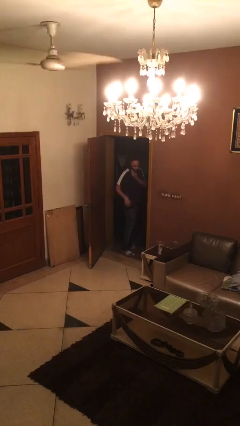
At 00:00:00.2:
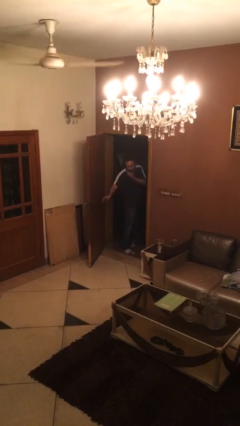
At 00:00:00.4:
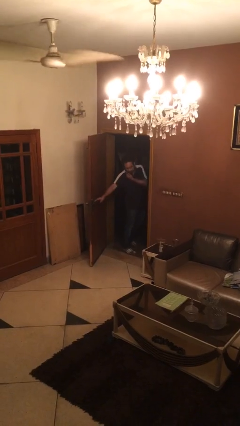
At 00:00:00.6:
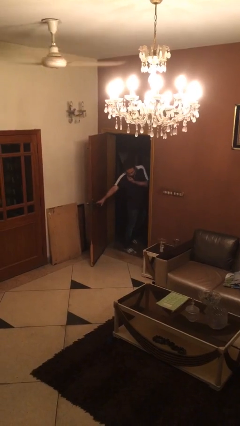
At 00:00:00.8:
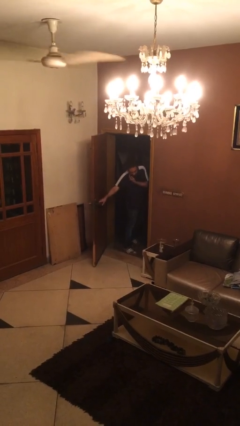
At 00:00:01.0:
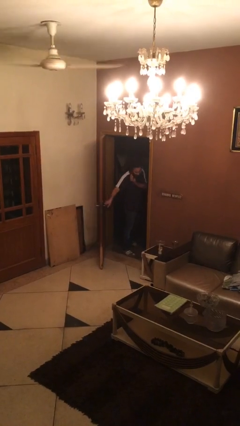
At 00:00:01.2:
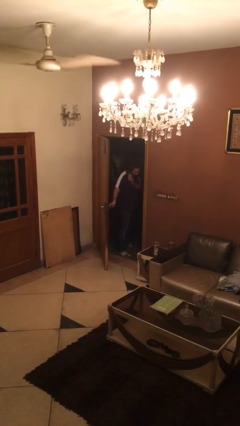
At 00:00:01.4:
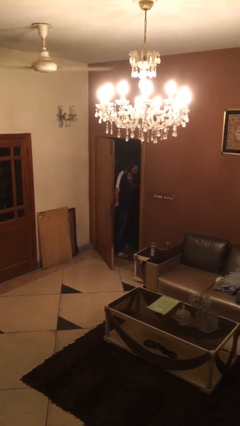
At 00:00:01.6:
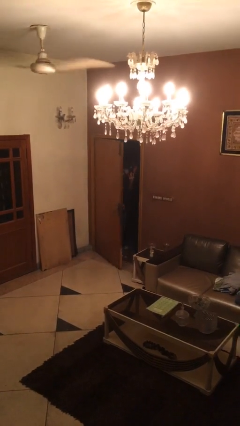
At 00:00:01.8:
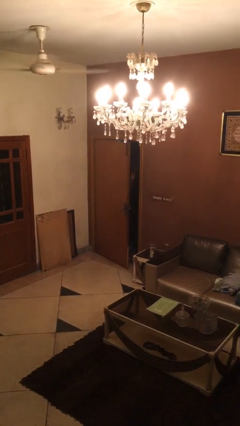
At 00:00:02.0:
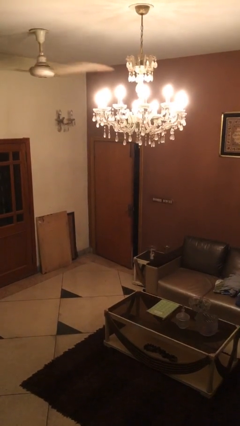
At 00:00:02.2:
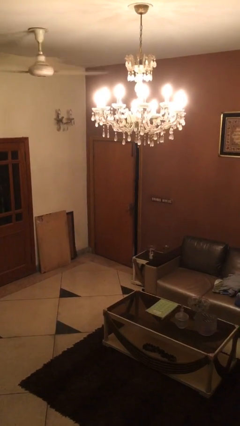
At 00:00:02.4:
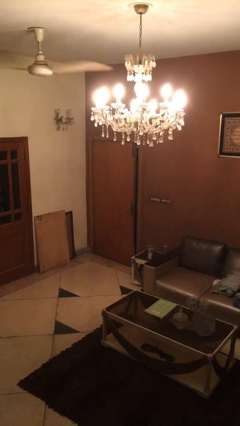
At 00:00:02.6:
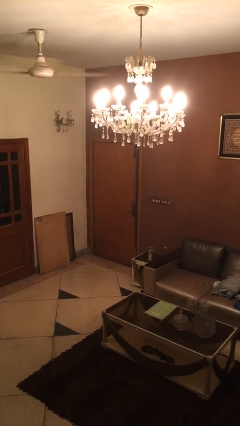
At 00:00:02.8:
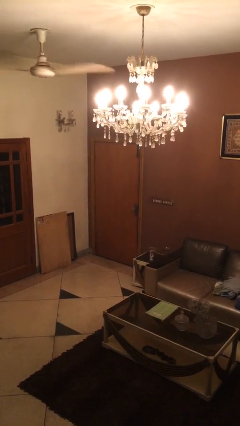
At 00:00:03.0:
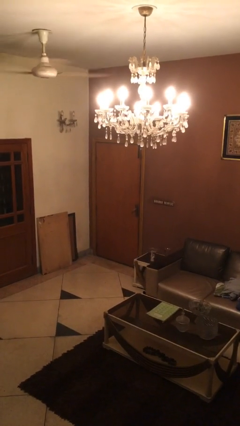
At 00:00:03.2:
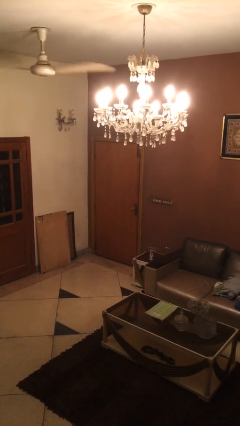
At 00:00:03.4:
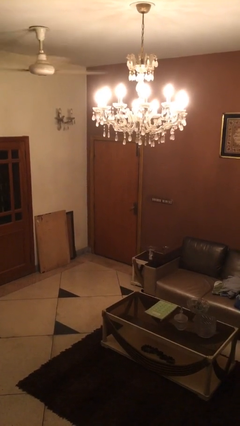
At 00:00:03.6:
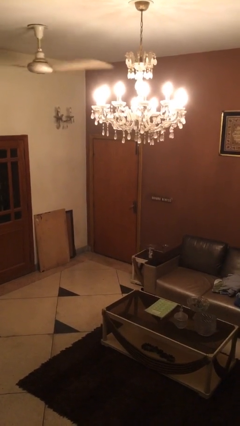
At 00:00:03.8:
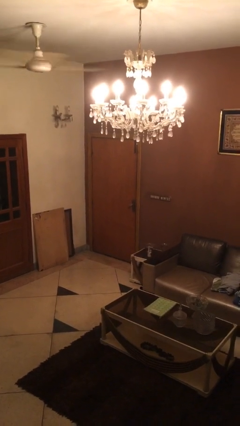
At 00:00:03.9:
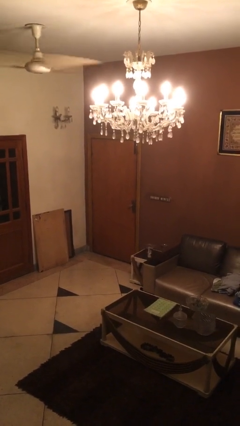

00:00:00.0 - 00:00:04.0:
person closes facility door

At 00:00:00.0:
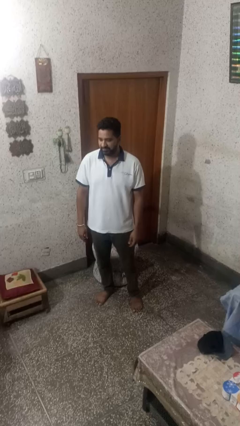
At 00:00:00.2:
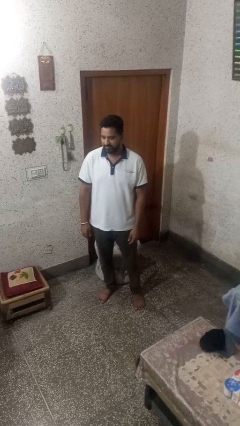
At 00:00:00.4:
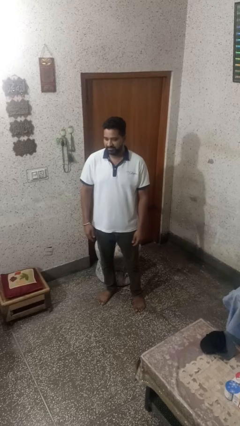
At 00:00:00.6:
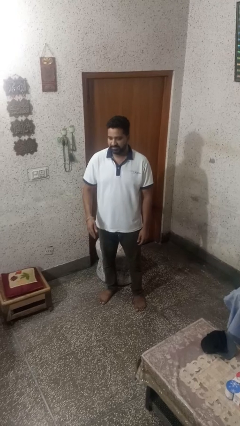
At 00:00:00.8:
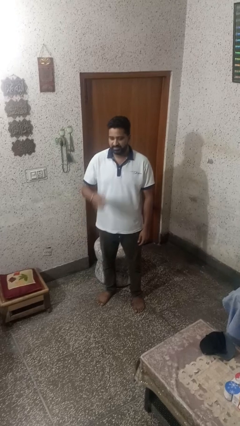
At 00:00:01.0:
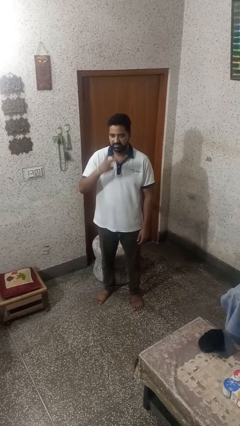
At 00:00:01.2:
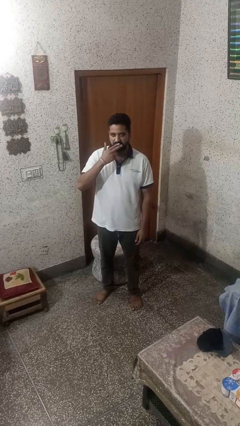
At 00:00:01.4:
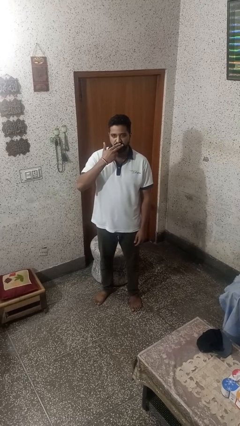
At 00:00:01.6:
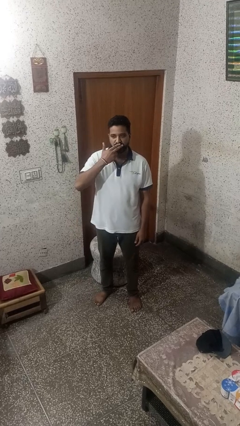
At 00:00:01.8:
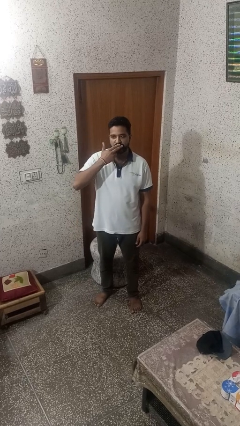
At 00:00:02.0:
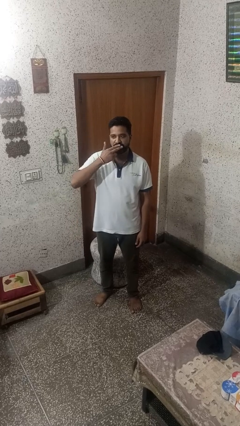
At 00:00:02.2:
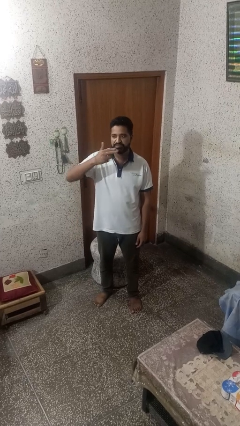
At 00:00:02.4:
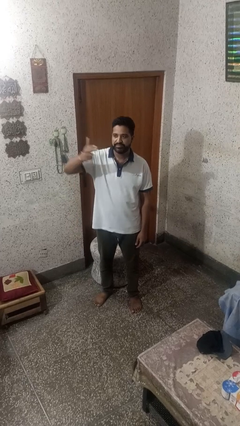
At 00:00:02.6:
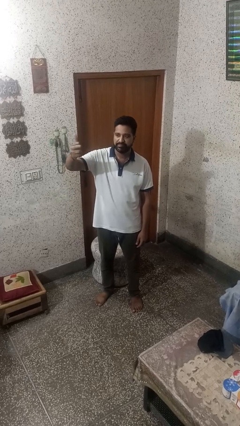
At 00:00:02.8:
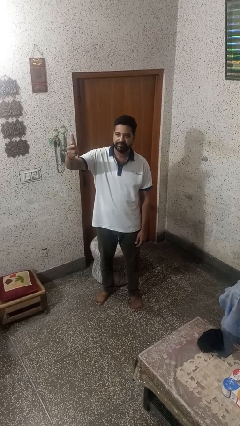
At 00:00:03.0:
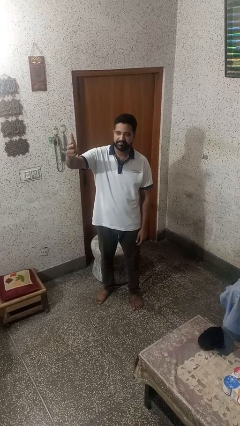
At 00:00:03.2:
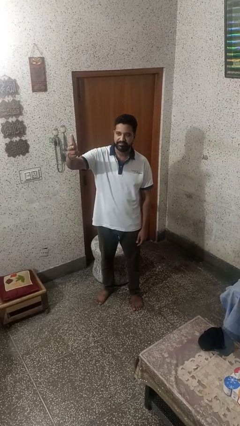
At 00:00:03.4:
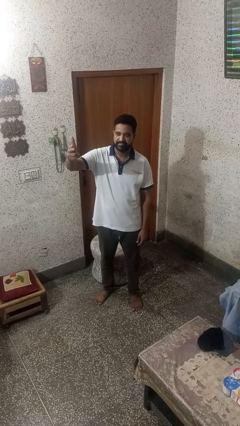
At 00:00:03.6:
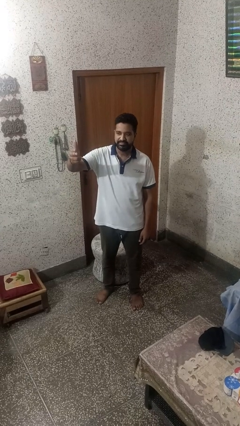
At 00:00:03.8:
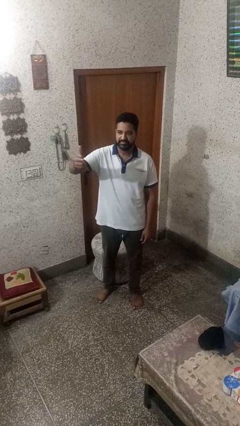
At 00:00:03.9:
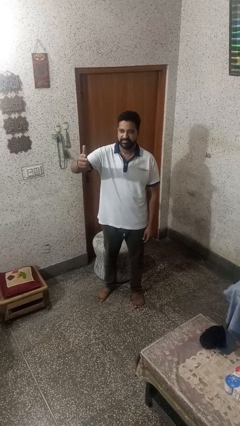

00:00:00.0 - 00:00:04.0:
person gestures blow kiss

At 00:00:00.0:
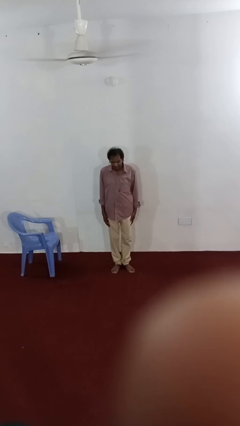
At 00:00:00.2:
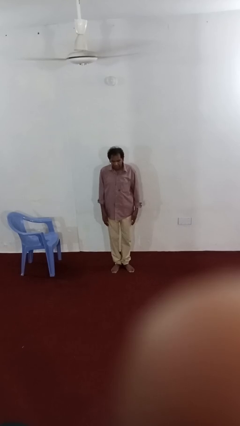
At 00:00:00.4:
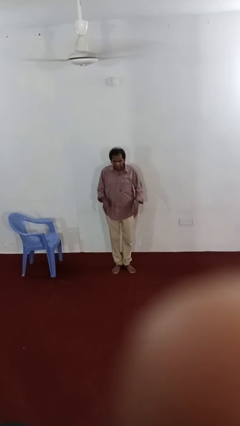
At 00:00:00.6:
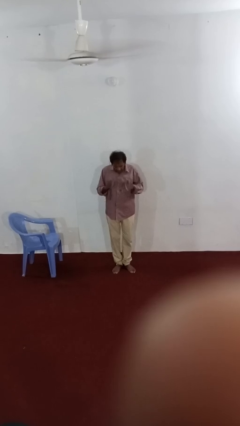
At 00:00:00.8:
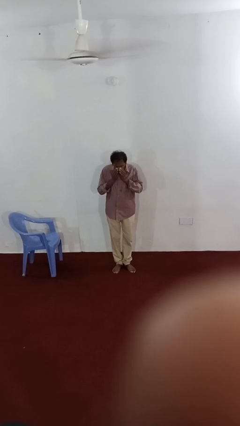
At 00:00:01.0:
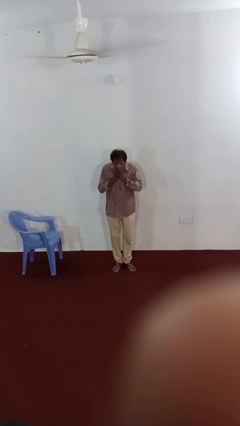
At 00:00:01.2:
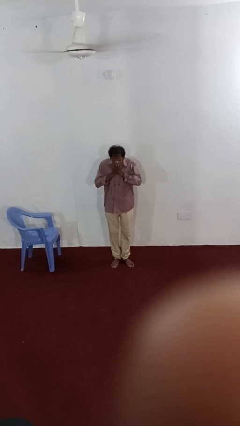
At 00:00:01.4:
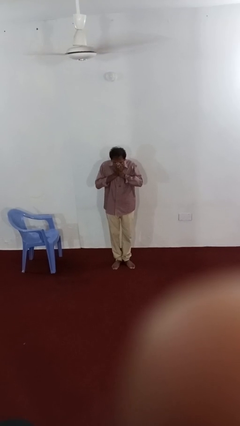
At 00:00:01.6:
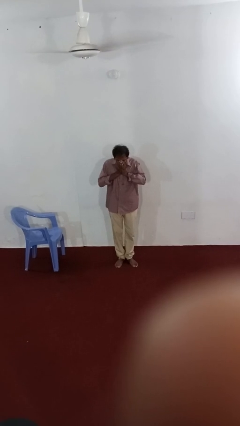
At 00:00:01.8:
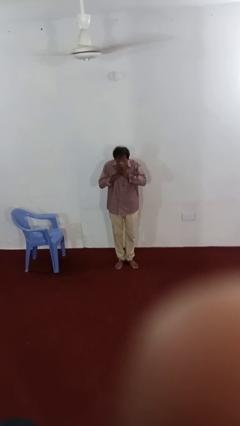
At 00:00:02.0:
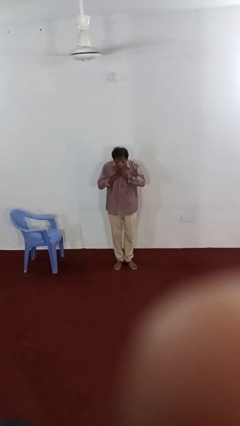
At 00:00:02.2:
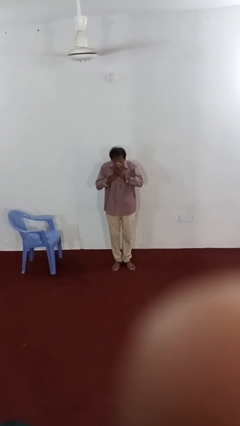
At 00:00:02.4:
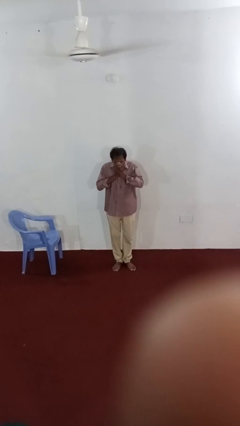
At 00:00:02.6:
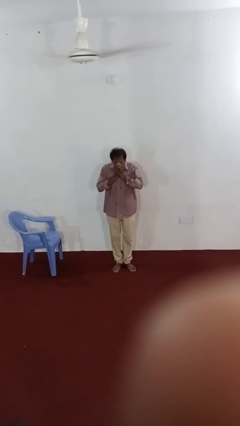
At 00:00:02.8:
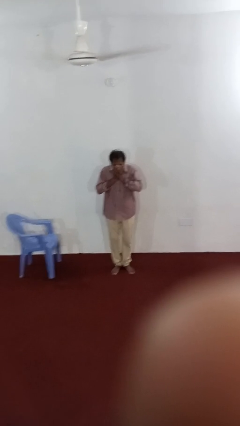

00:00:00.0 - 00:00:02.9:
person sneezes into hand

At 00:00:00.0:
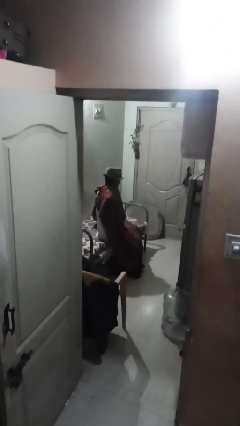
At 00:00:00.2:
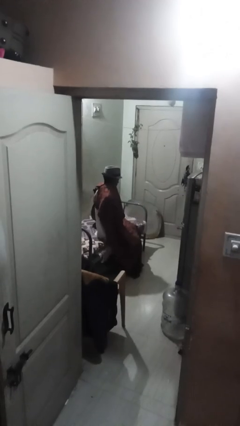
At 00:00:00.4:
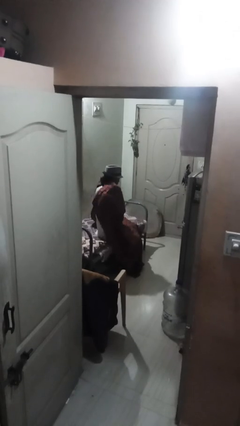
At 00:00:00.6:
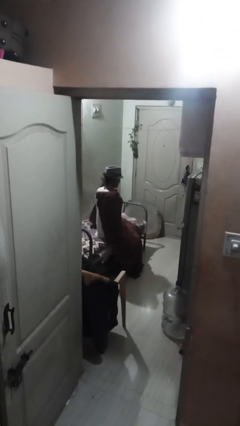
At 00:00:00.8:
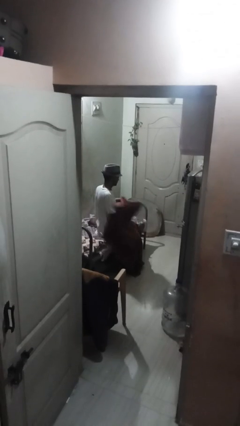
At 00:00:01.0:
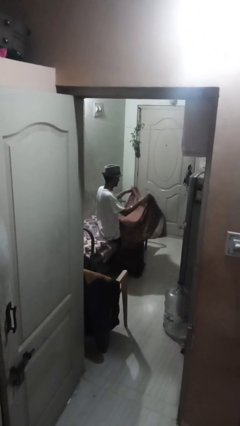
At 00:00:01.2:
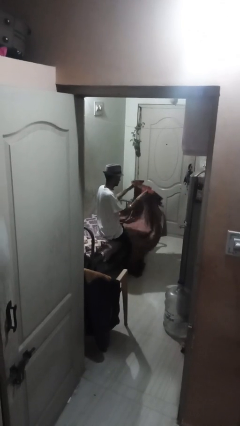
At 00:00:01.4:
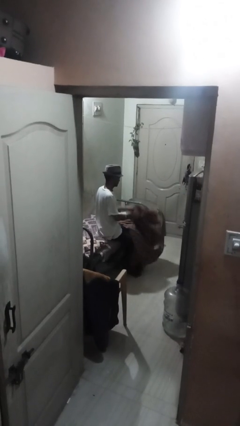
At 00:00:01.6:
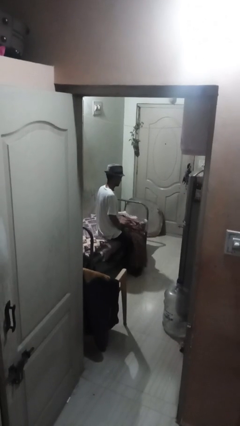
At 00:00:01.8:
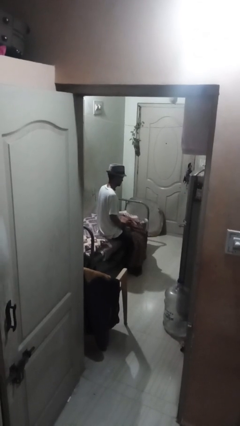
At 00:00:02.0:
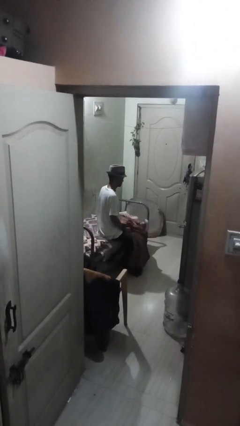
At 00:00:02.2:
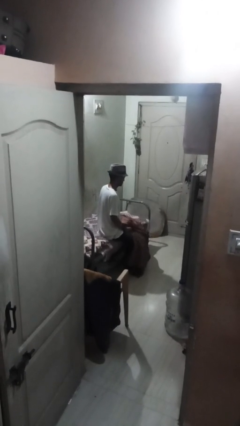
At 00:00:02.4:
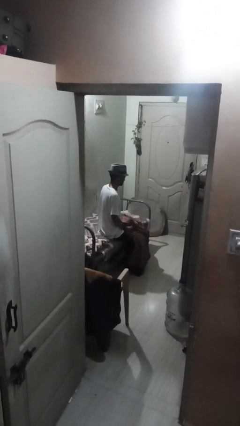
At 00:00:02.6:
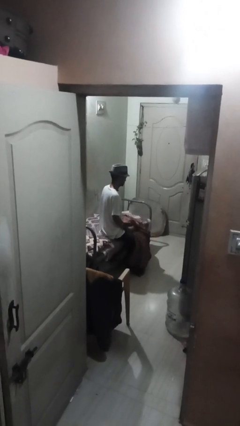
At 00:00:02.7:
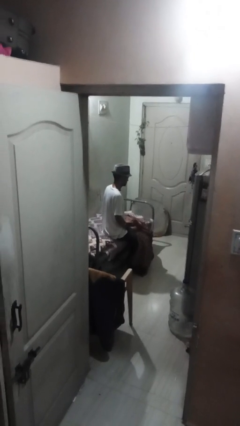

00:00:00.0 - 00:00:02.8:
person uncovers with blanket

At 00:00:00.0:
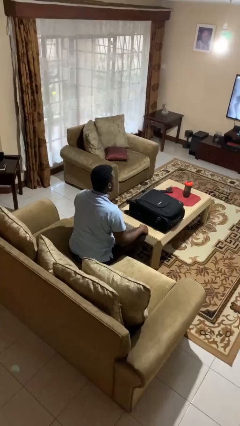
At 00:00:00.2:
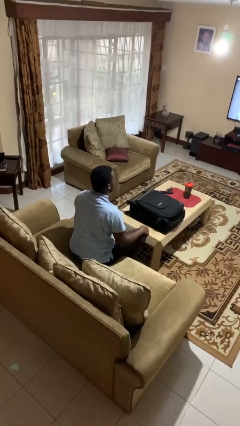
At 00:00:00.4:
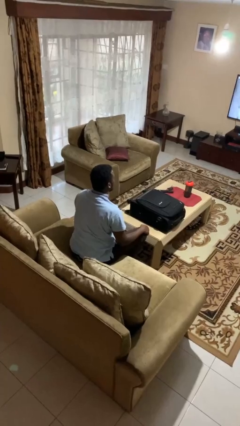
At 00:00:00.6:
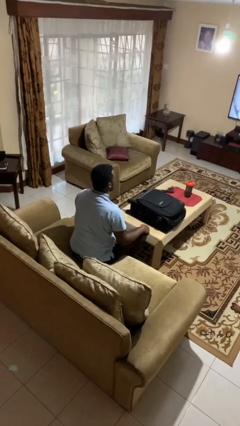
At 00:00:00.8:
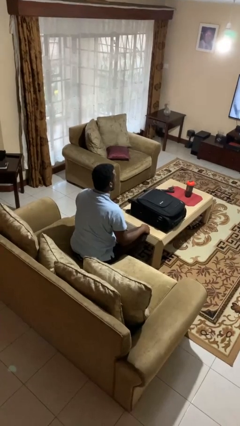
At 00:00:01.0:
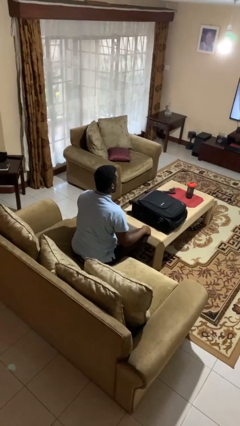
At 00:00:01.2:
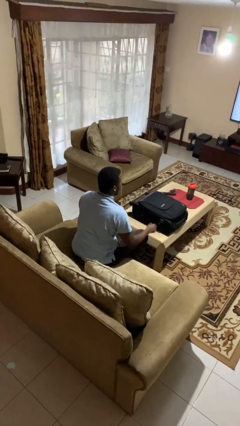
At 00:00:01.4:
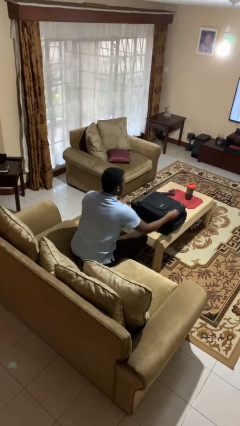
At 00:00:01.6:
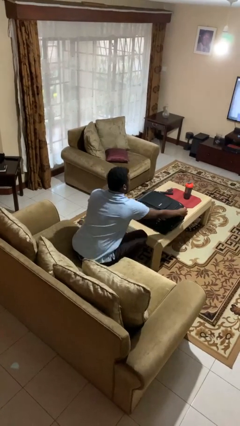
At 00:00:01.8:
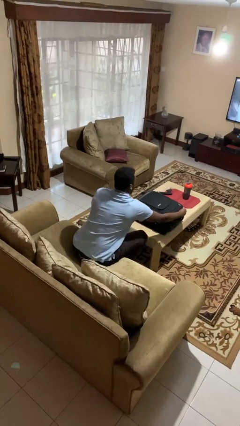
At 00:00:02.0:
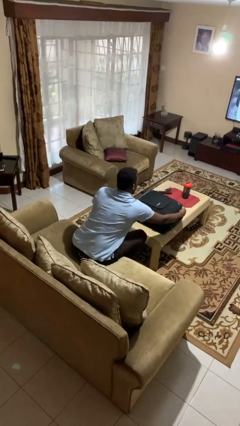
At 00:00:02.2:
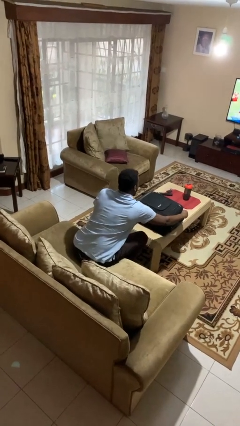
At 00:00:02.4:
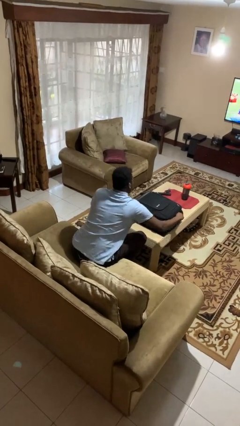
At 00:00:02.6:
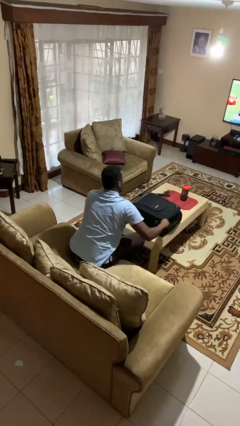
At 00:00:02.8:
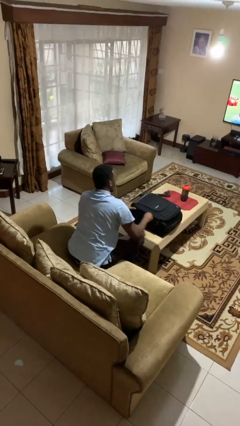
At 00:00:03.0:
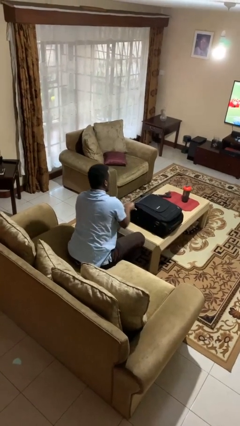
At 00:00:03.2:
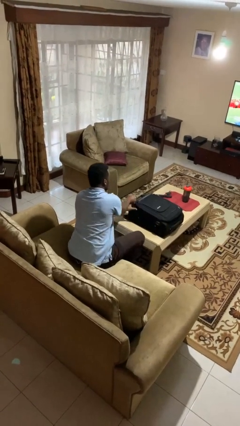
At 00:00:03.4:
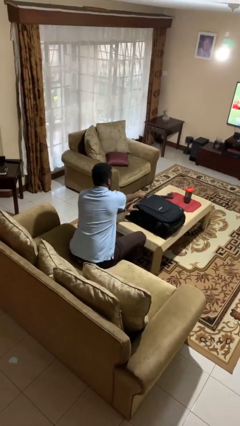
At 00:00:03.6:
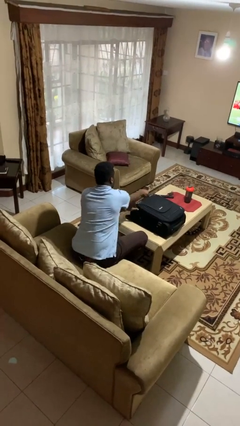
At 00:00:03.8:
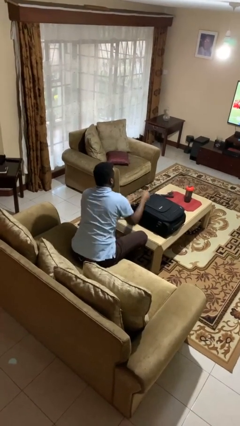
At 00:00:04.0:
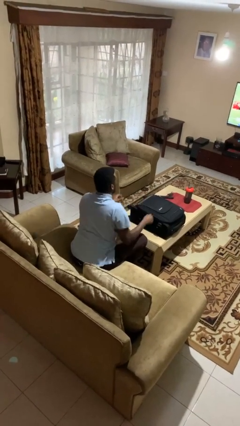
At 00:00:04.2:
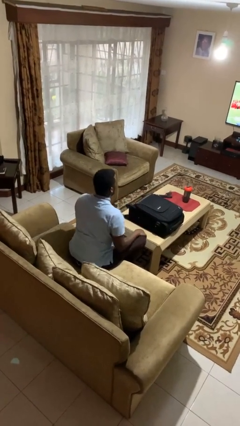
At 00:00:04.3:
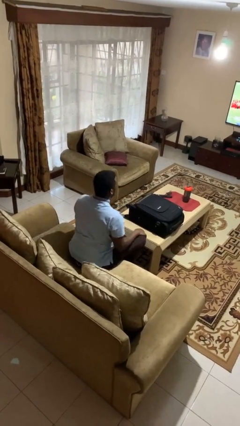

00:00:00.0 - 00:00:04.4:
person opens suitcase
